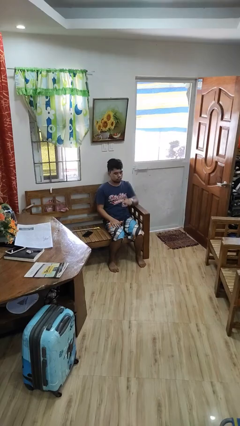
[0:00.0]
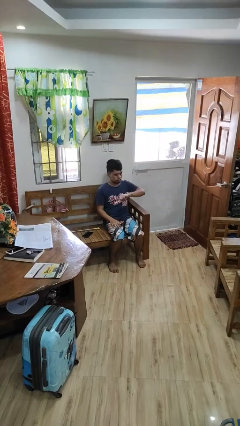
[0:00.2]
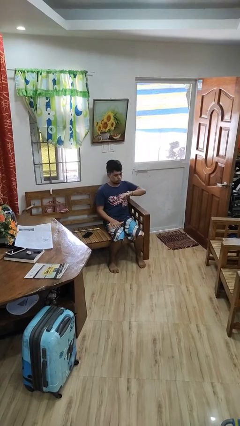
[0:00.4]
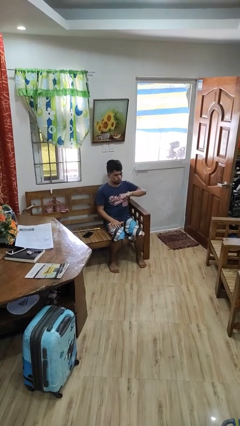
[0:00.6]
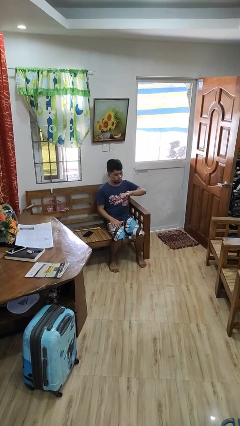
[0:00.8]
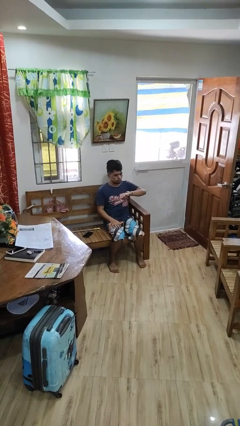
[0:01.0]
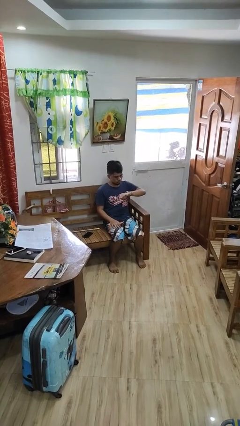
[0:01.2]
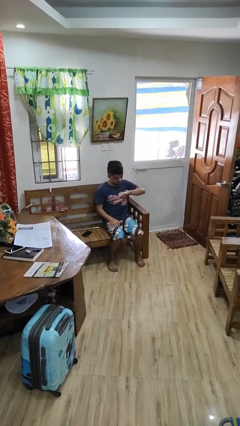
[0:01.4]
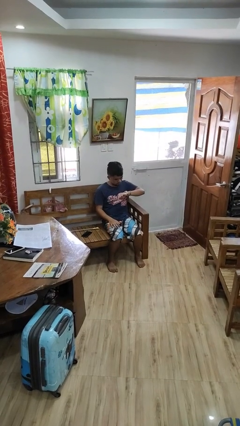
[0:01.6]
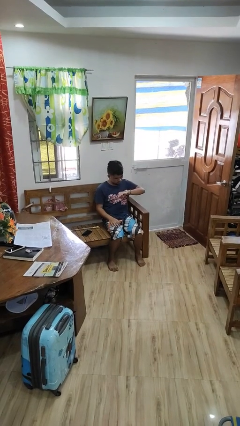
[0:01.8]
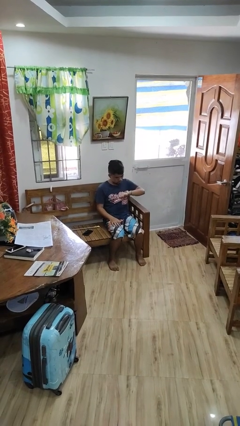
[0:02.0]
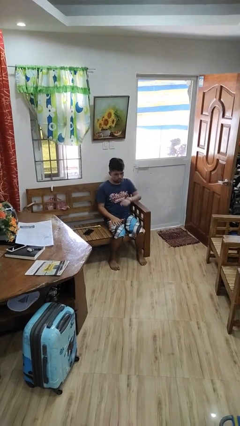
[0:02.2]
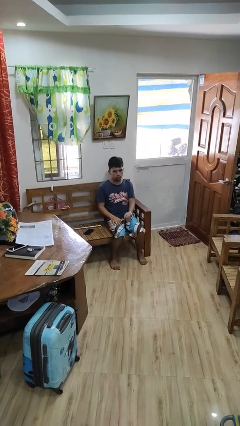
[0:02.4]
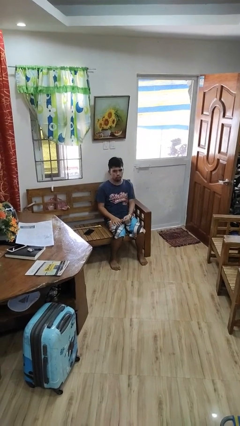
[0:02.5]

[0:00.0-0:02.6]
person looks at wristwatch

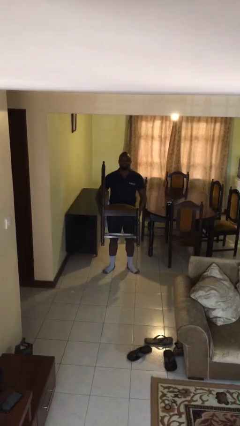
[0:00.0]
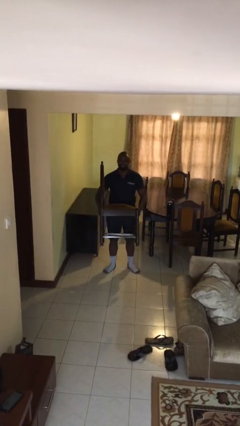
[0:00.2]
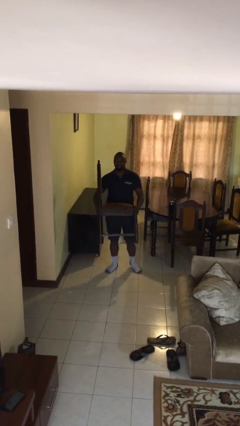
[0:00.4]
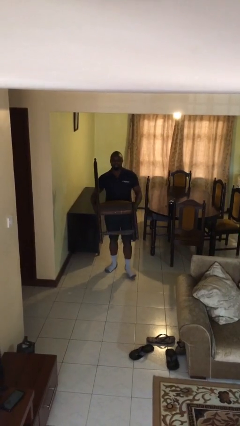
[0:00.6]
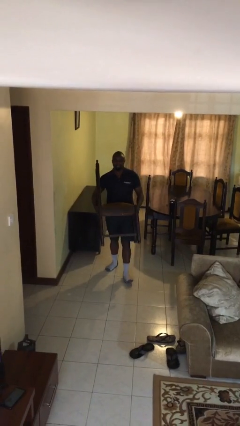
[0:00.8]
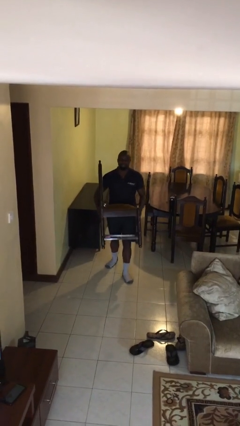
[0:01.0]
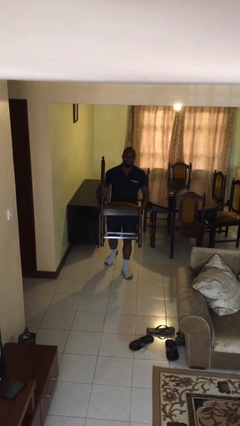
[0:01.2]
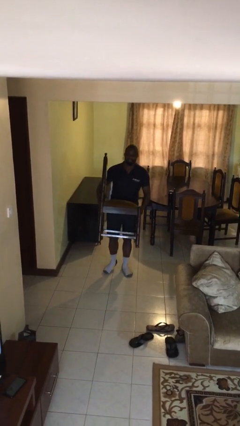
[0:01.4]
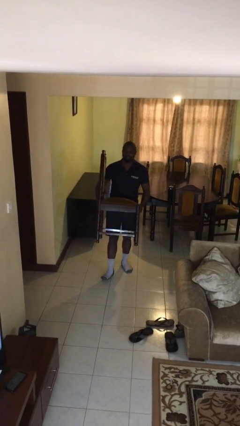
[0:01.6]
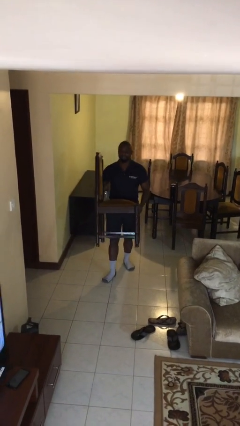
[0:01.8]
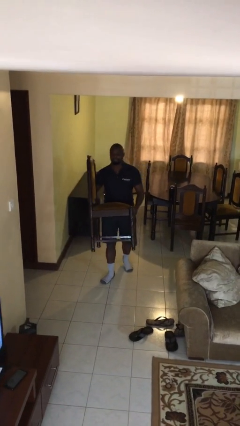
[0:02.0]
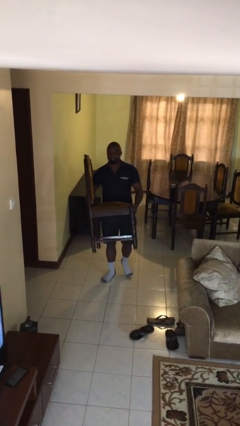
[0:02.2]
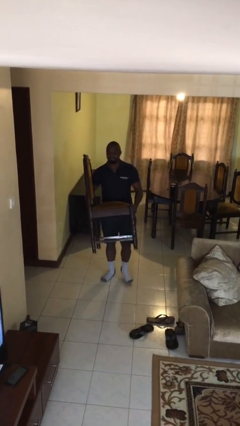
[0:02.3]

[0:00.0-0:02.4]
person carries heavy object

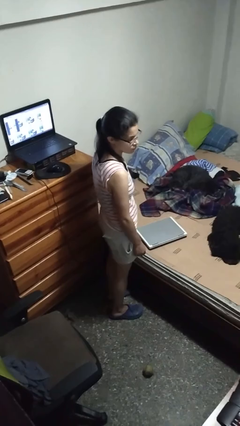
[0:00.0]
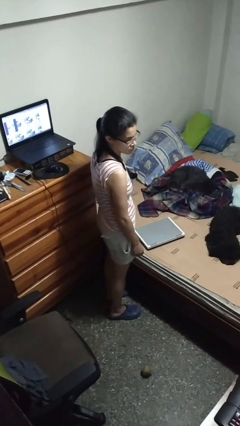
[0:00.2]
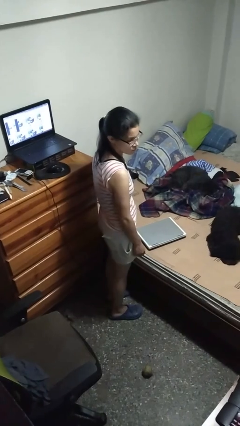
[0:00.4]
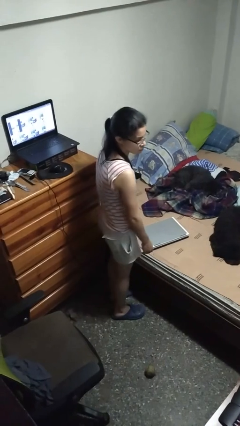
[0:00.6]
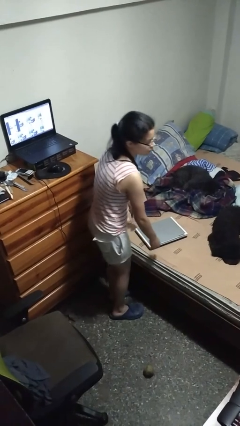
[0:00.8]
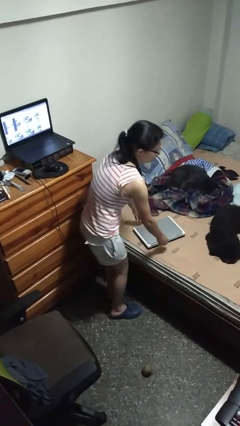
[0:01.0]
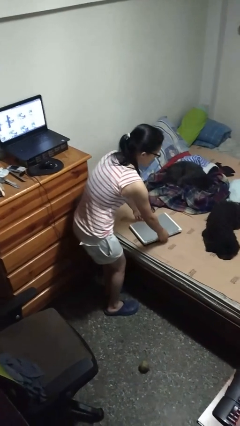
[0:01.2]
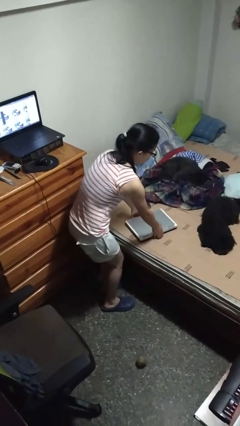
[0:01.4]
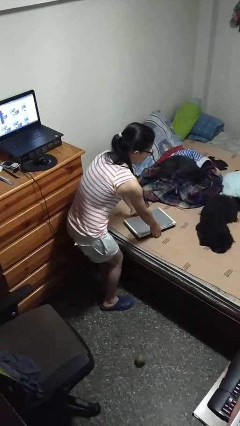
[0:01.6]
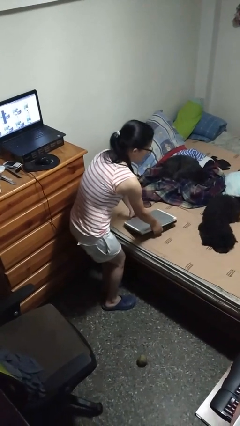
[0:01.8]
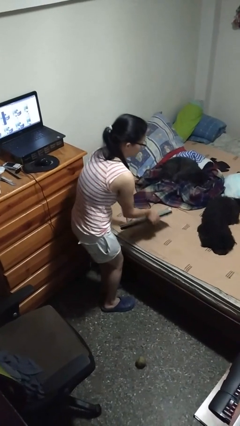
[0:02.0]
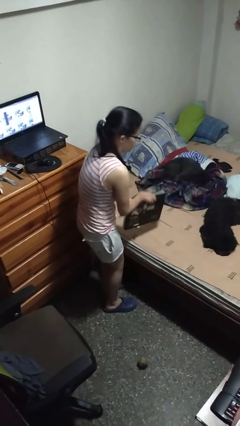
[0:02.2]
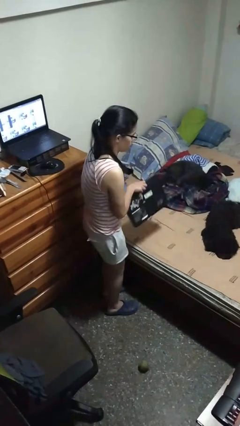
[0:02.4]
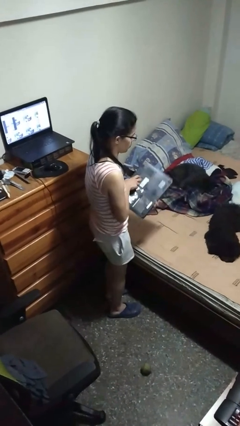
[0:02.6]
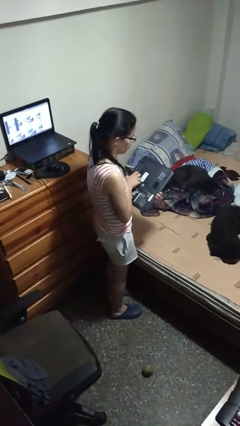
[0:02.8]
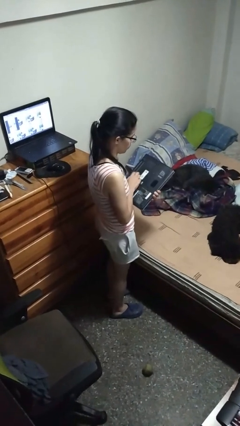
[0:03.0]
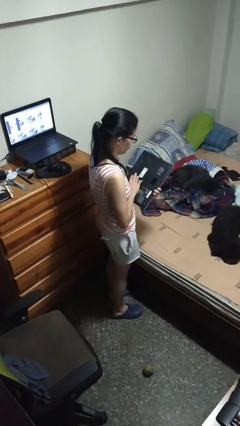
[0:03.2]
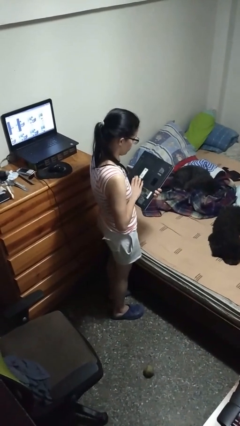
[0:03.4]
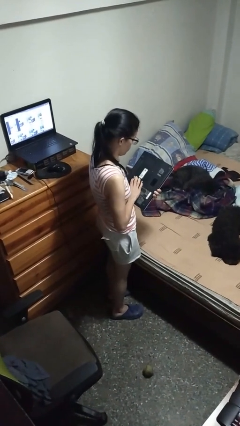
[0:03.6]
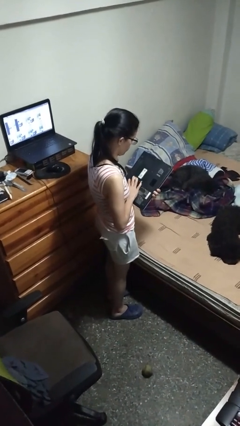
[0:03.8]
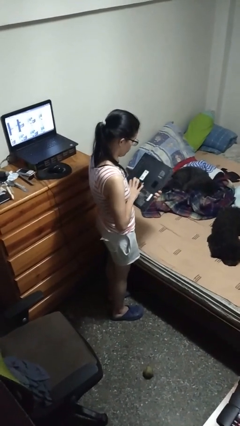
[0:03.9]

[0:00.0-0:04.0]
person picks up object from bed

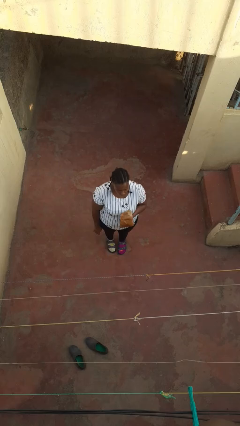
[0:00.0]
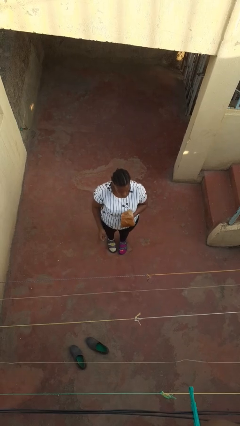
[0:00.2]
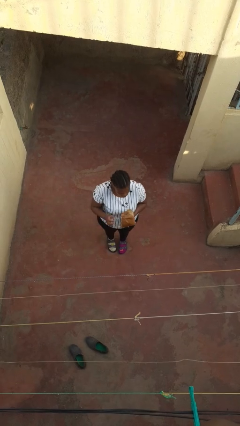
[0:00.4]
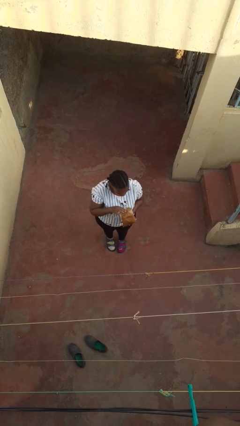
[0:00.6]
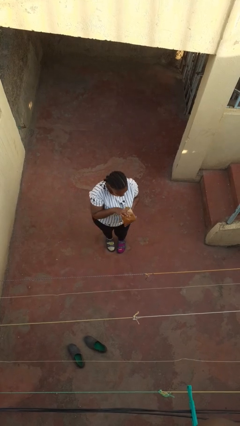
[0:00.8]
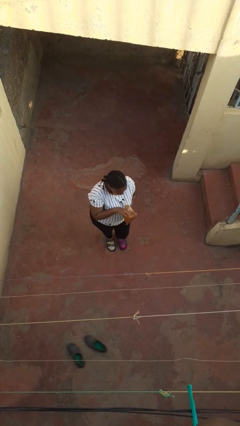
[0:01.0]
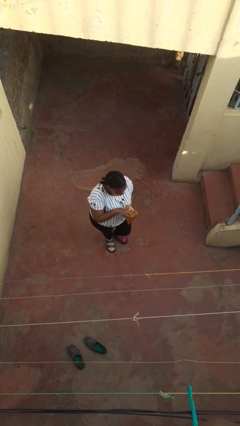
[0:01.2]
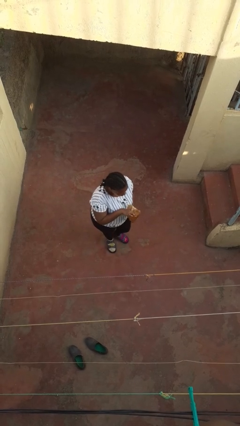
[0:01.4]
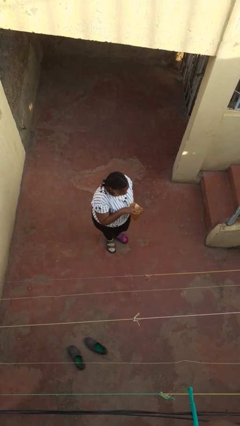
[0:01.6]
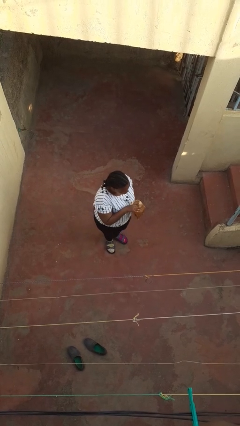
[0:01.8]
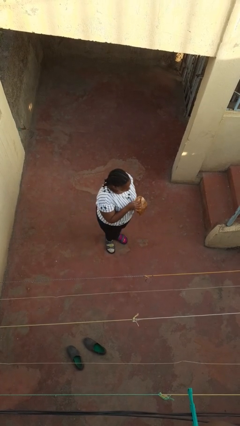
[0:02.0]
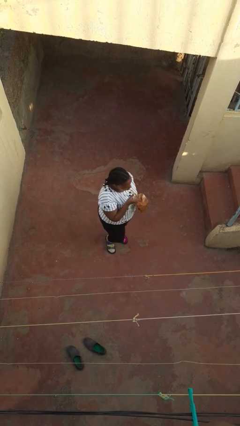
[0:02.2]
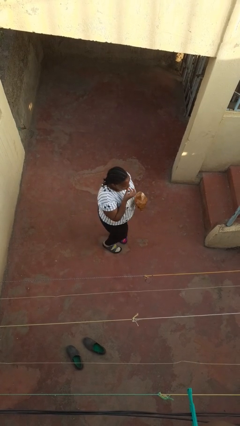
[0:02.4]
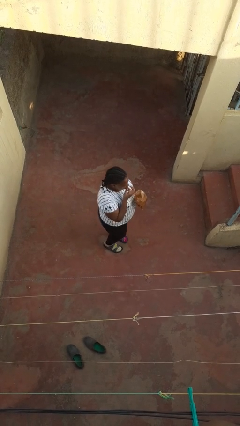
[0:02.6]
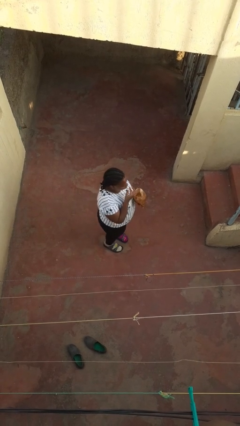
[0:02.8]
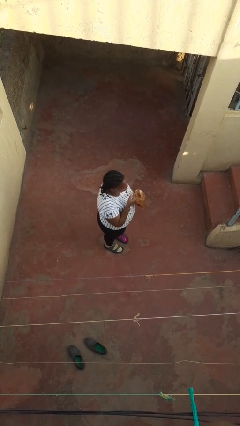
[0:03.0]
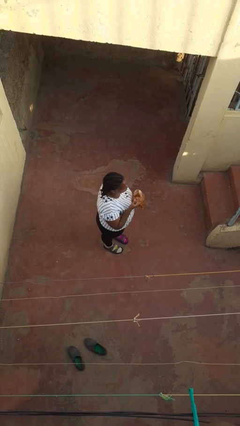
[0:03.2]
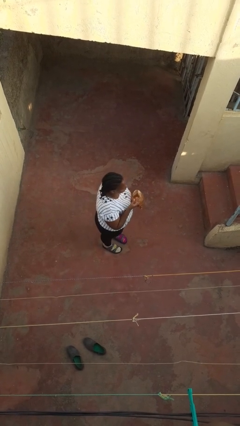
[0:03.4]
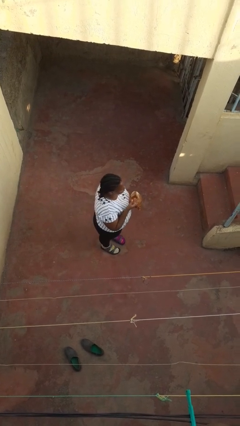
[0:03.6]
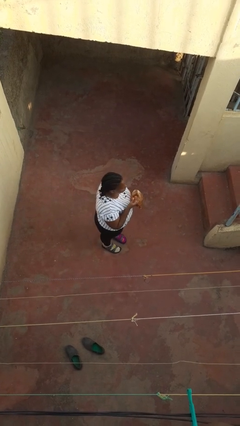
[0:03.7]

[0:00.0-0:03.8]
person eats snack from bag

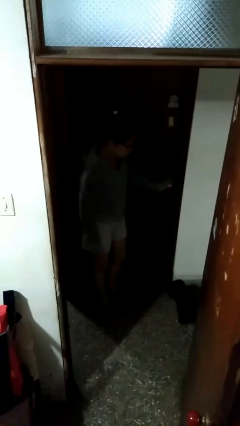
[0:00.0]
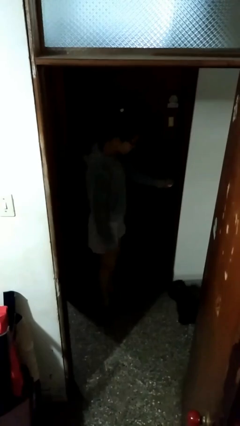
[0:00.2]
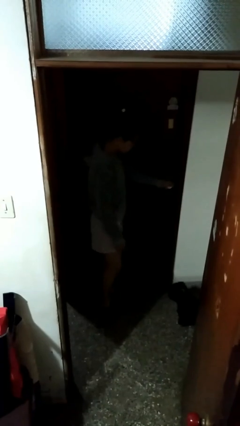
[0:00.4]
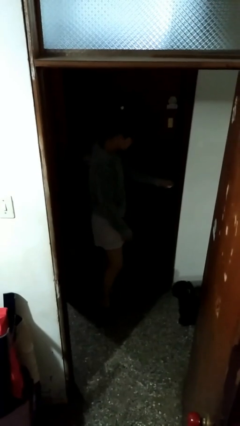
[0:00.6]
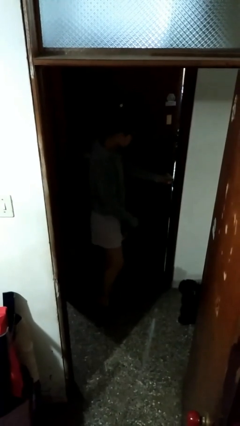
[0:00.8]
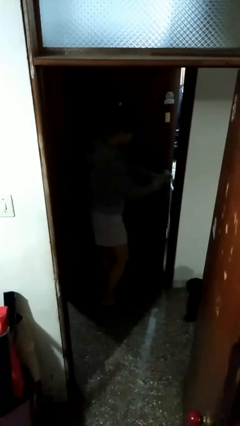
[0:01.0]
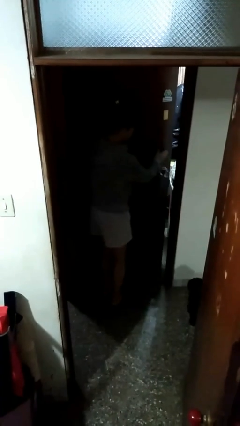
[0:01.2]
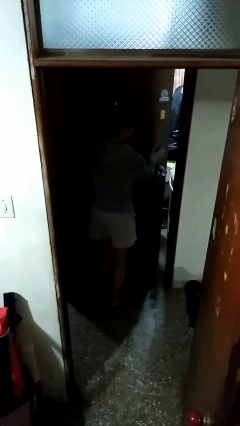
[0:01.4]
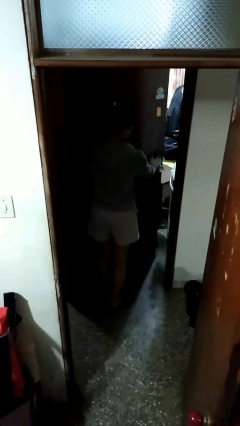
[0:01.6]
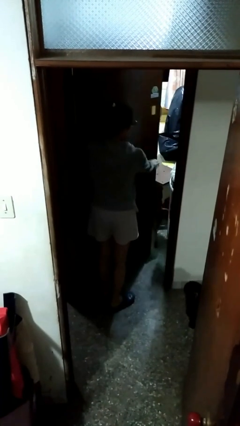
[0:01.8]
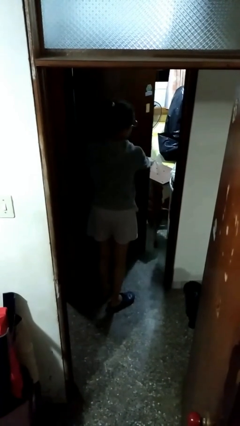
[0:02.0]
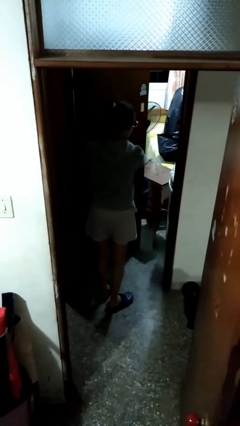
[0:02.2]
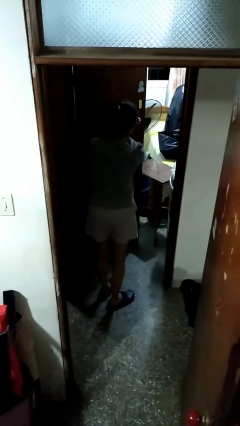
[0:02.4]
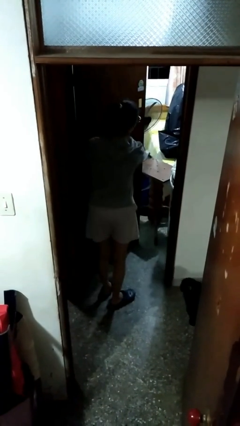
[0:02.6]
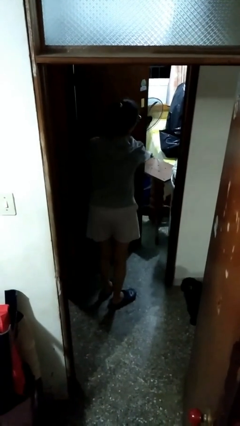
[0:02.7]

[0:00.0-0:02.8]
person opens facility door

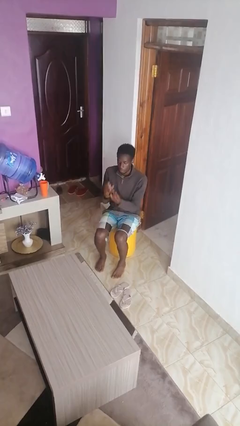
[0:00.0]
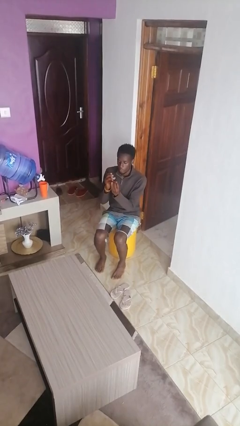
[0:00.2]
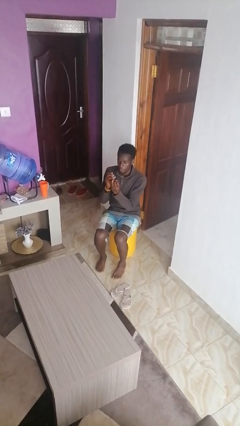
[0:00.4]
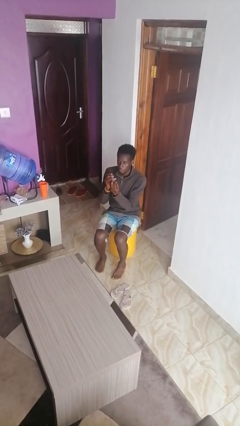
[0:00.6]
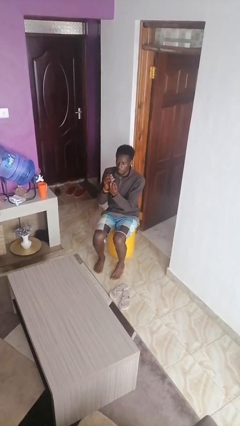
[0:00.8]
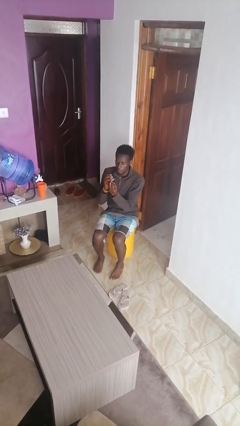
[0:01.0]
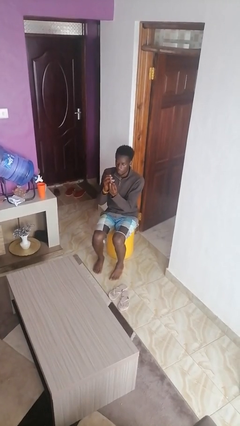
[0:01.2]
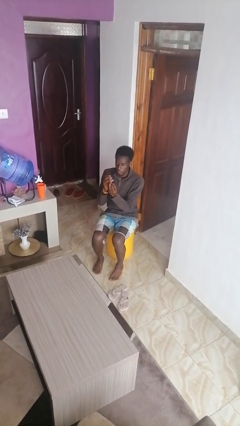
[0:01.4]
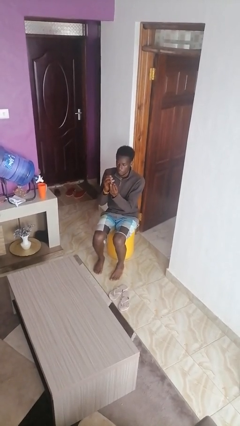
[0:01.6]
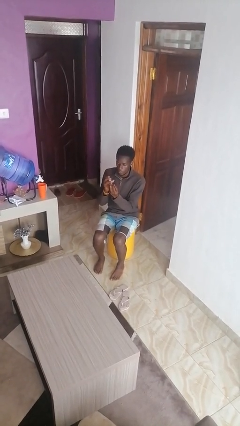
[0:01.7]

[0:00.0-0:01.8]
person clips fingernails
